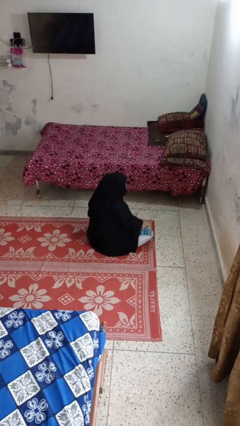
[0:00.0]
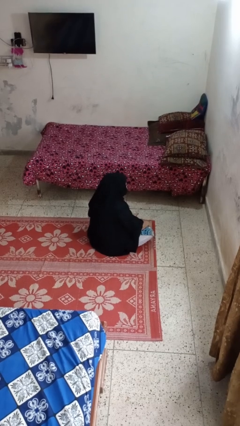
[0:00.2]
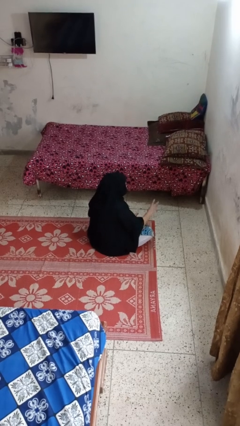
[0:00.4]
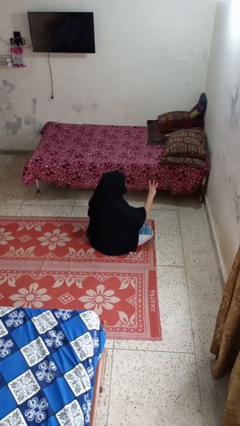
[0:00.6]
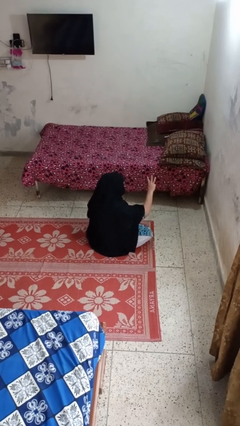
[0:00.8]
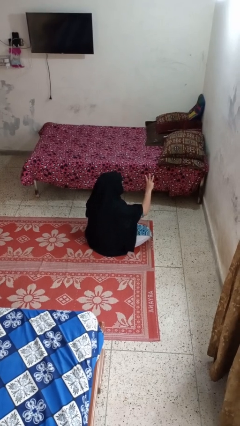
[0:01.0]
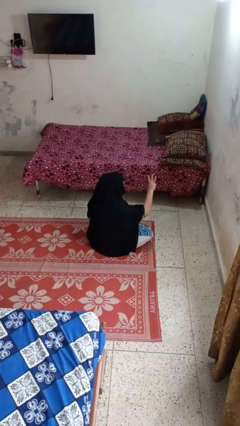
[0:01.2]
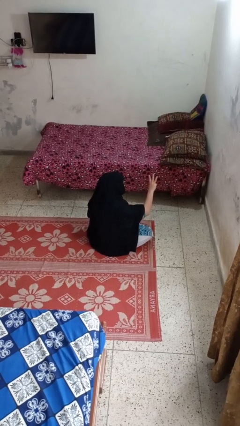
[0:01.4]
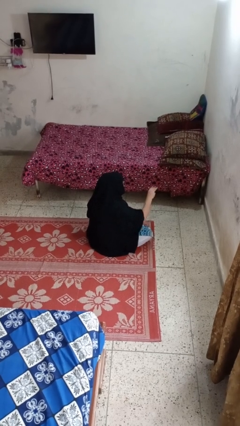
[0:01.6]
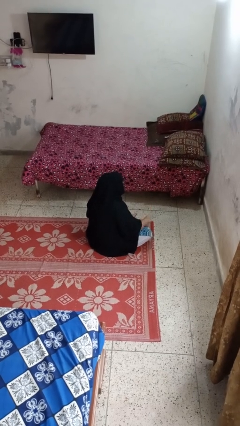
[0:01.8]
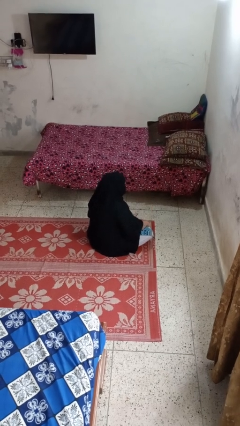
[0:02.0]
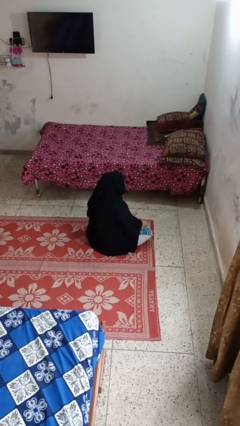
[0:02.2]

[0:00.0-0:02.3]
person gestures number three

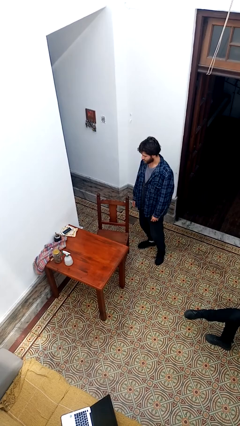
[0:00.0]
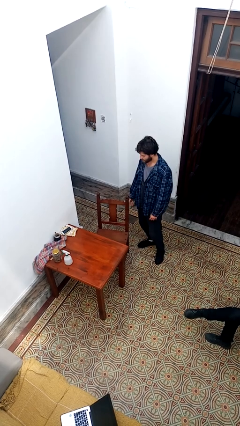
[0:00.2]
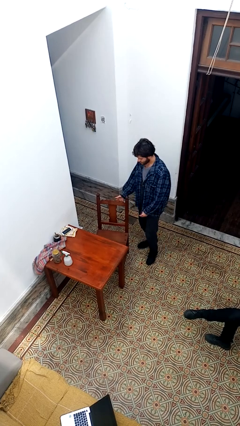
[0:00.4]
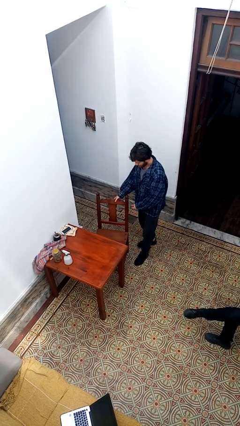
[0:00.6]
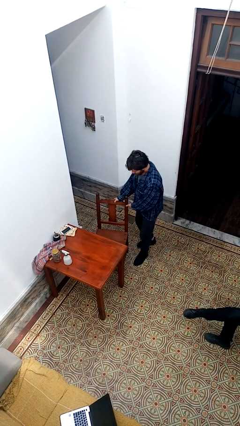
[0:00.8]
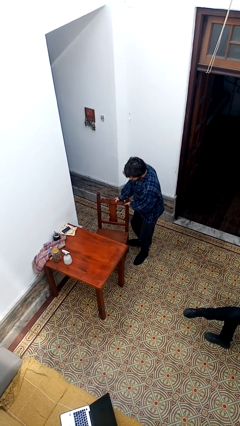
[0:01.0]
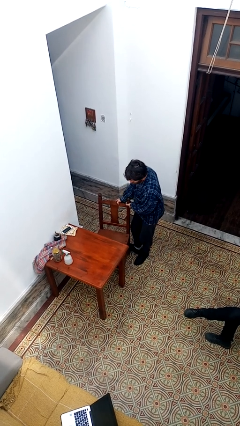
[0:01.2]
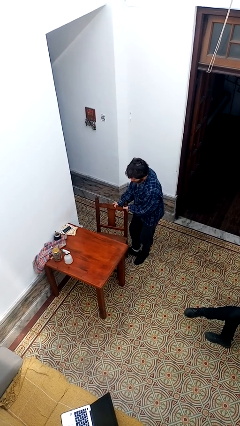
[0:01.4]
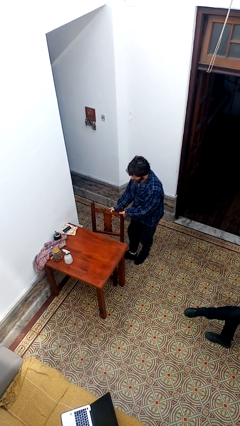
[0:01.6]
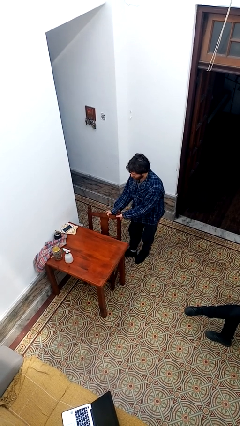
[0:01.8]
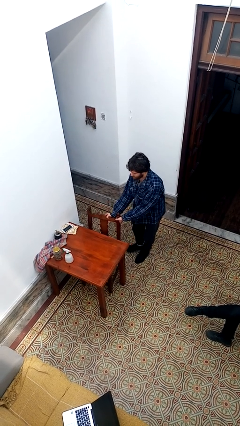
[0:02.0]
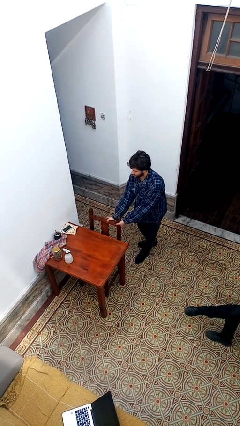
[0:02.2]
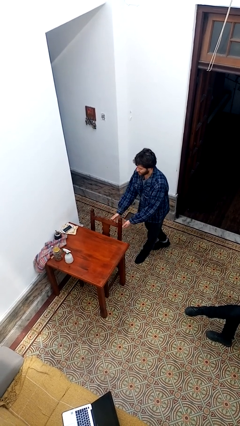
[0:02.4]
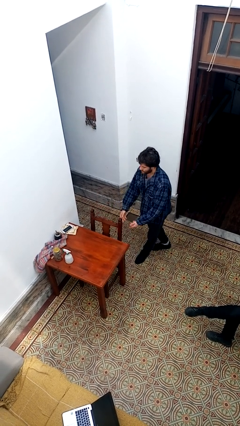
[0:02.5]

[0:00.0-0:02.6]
person pushes in chair

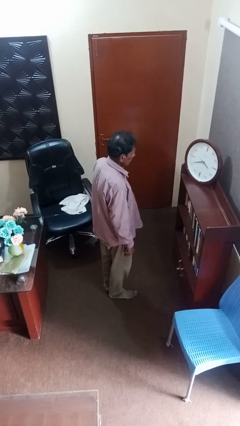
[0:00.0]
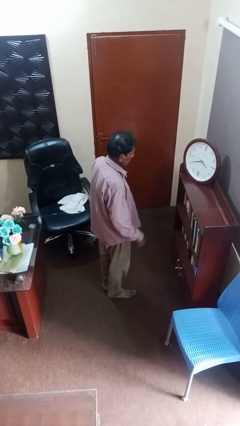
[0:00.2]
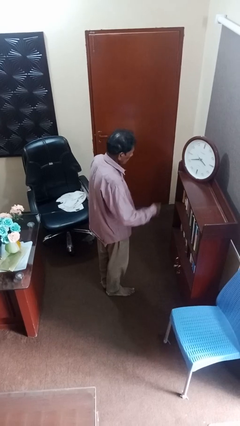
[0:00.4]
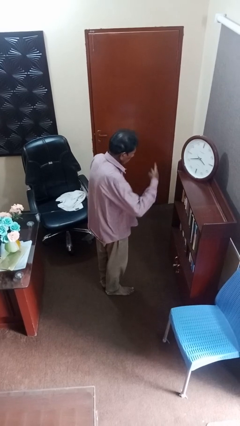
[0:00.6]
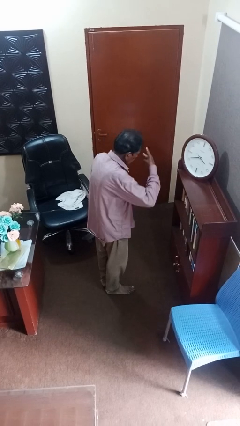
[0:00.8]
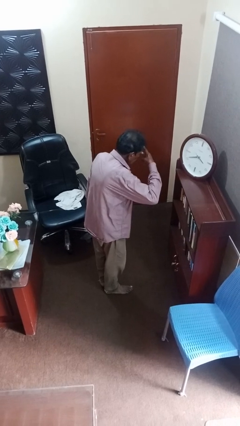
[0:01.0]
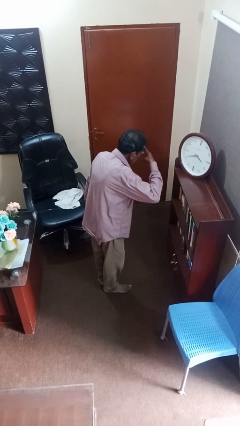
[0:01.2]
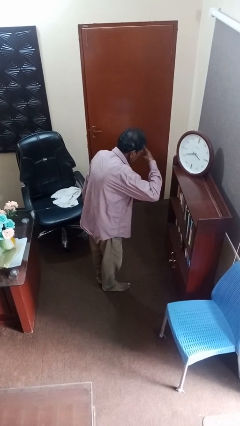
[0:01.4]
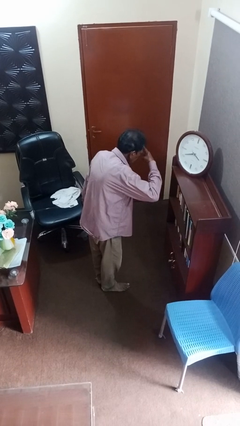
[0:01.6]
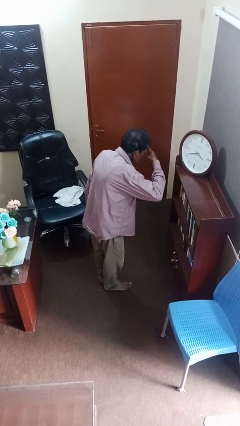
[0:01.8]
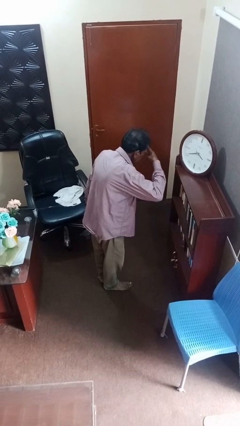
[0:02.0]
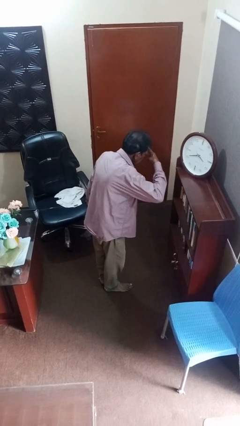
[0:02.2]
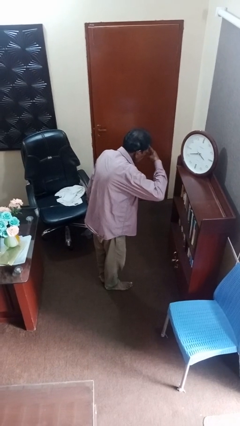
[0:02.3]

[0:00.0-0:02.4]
person gestures watch closely

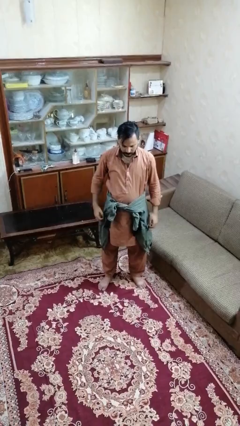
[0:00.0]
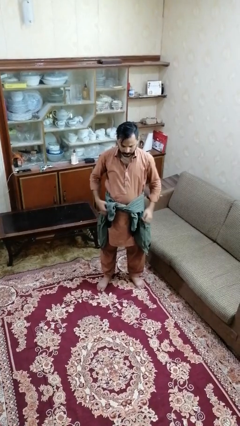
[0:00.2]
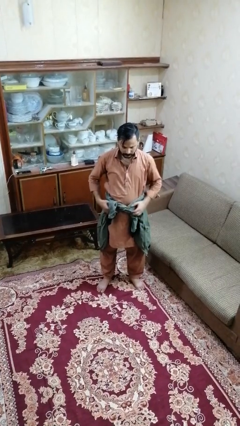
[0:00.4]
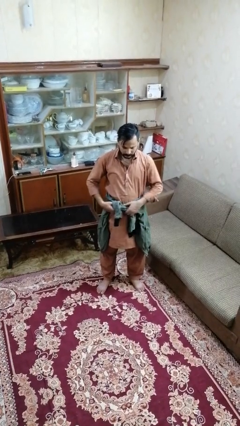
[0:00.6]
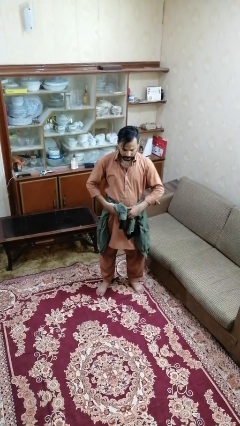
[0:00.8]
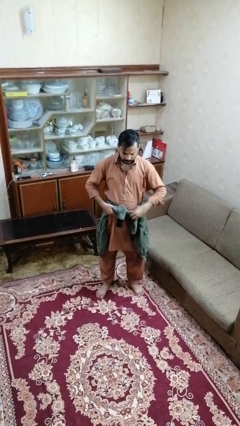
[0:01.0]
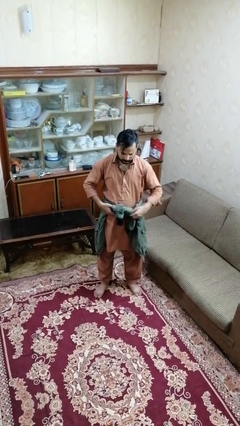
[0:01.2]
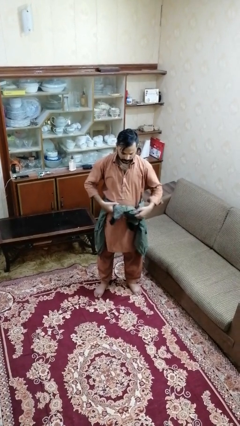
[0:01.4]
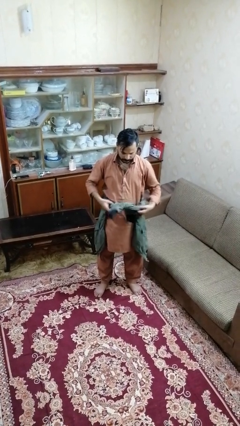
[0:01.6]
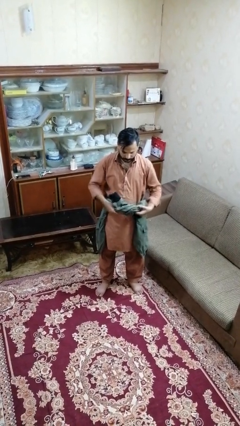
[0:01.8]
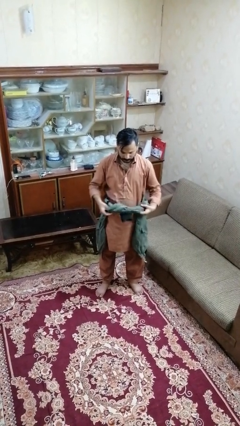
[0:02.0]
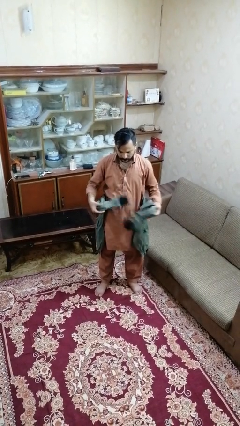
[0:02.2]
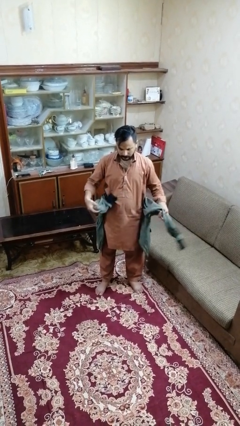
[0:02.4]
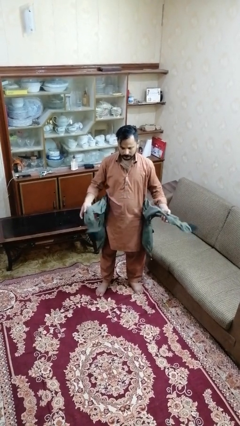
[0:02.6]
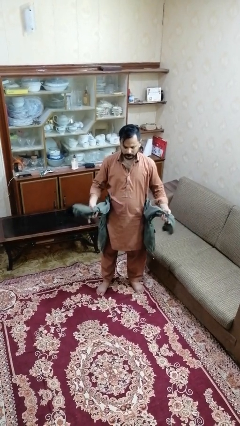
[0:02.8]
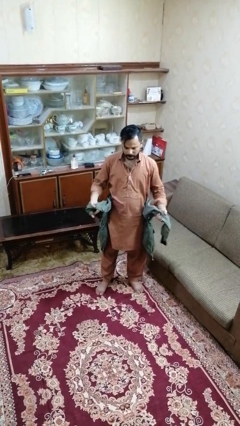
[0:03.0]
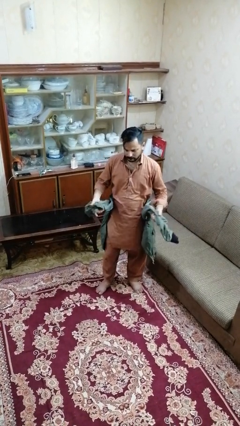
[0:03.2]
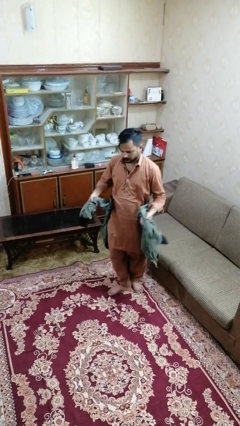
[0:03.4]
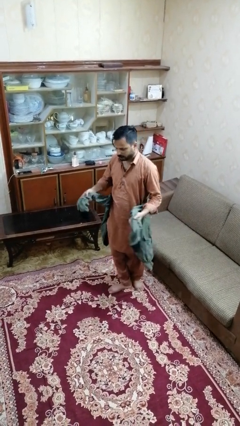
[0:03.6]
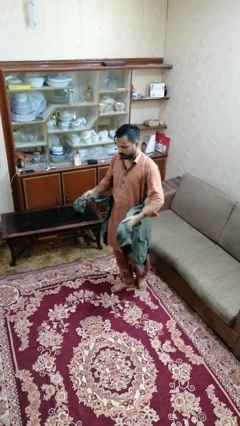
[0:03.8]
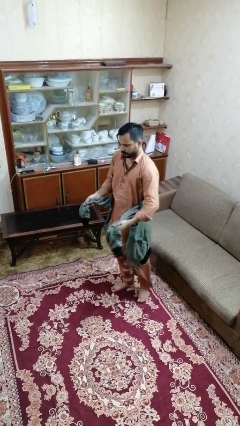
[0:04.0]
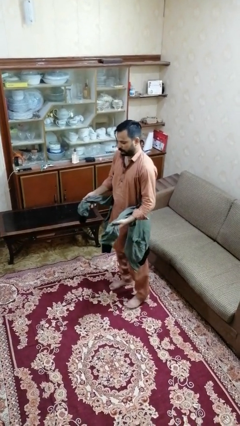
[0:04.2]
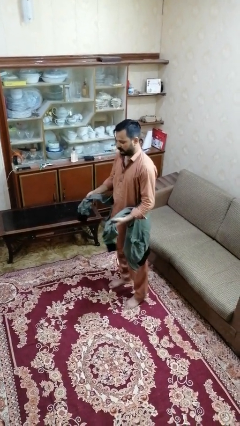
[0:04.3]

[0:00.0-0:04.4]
person unties jacket around waist

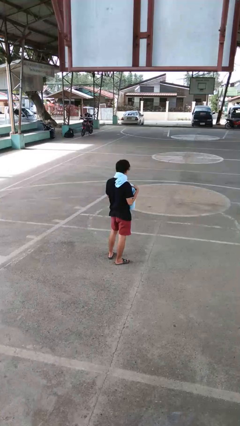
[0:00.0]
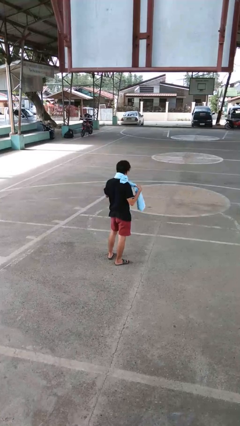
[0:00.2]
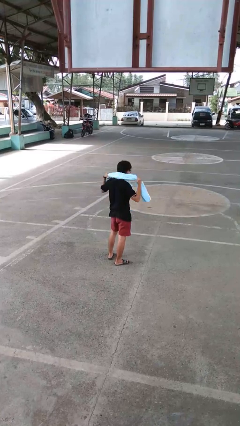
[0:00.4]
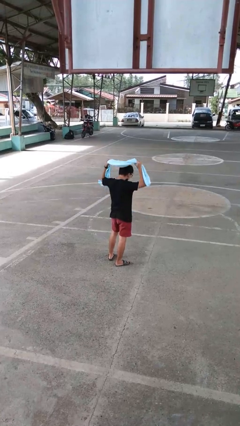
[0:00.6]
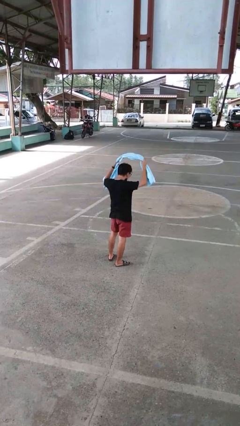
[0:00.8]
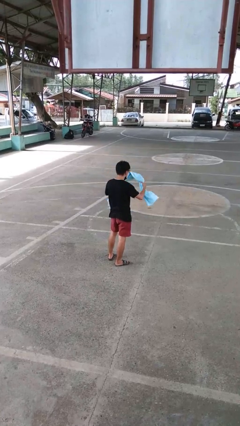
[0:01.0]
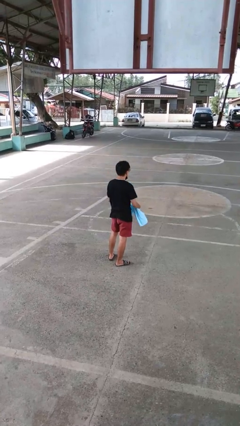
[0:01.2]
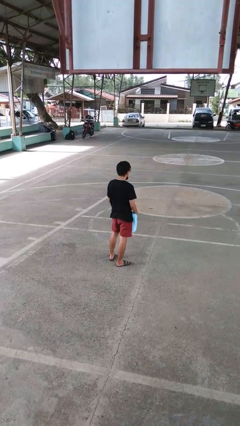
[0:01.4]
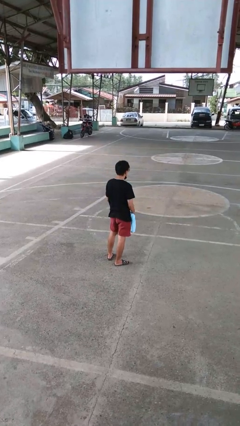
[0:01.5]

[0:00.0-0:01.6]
person takes off scarf

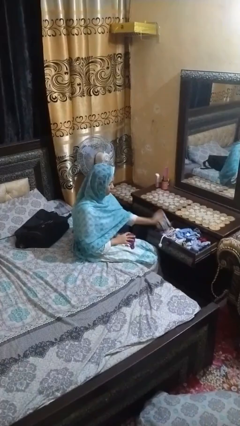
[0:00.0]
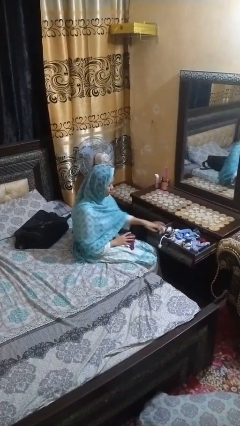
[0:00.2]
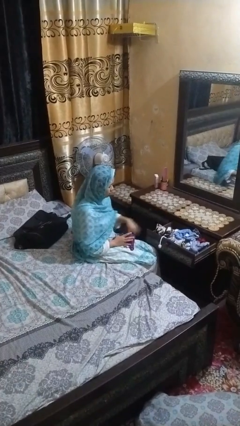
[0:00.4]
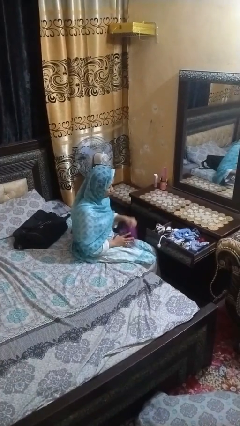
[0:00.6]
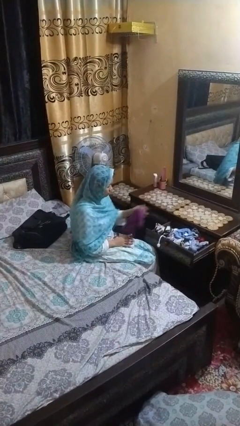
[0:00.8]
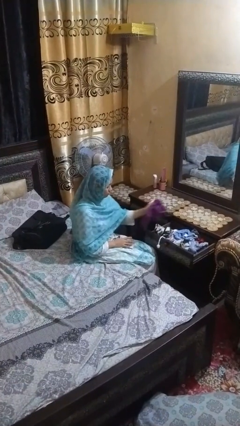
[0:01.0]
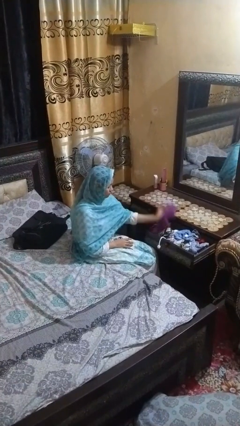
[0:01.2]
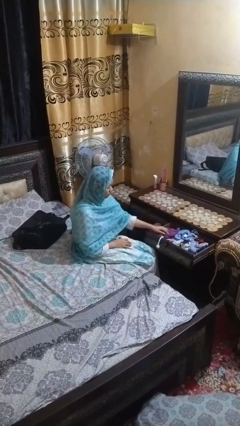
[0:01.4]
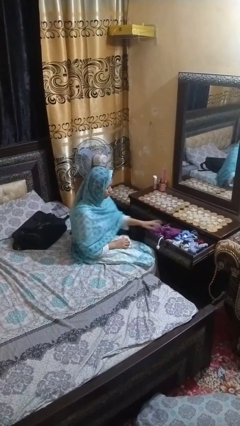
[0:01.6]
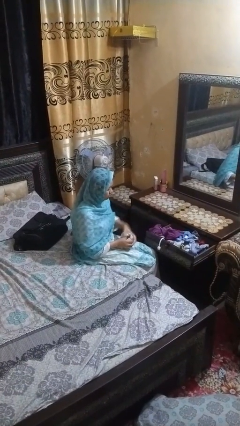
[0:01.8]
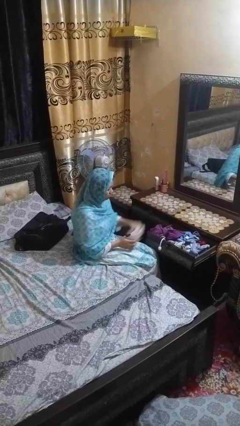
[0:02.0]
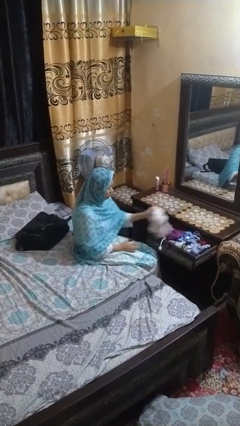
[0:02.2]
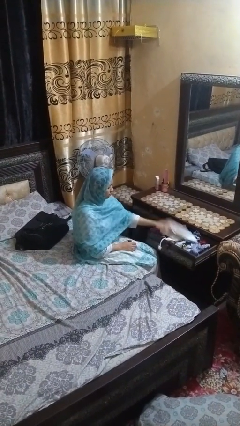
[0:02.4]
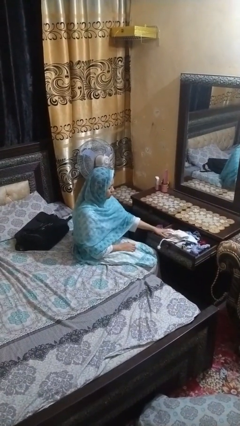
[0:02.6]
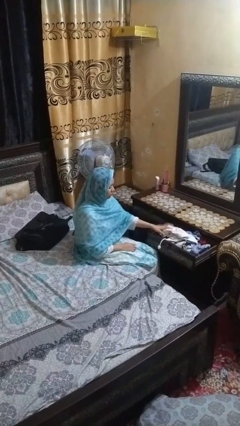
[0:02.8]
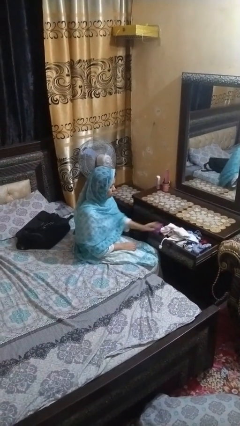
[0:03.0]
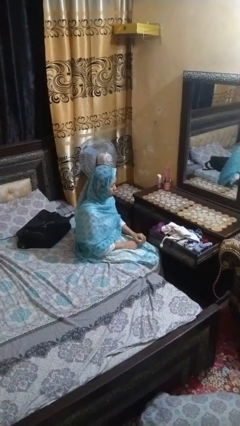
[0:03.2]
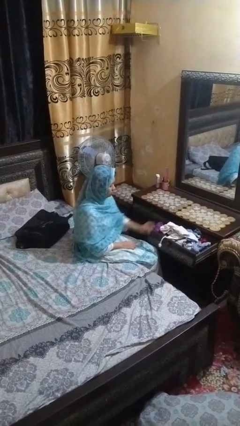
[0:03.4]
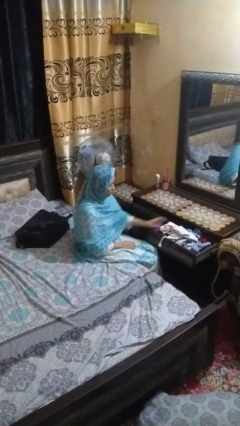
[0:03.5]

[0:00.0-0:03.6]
person puts clothes into dresser

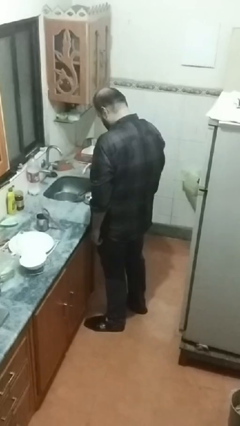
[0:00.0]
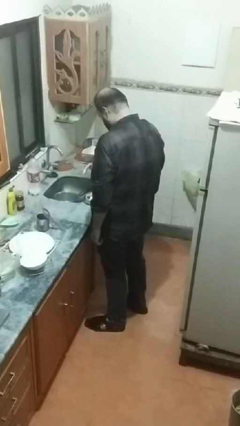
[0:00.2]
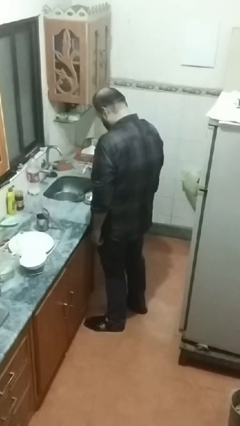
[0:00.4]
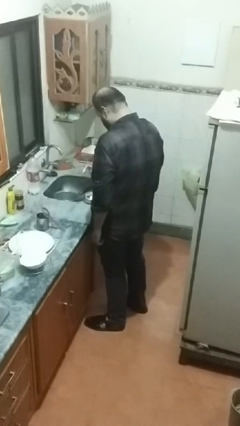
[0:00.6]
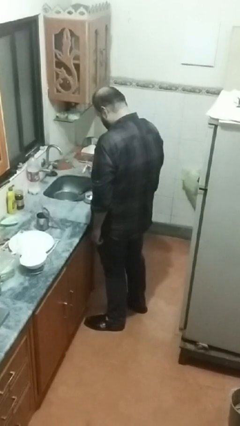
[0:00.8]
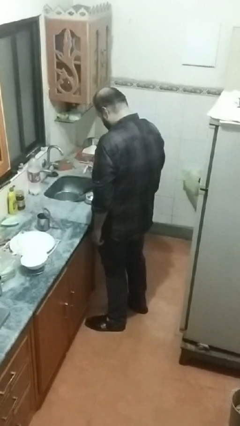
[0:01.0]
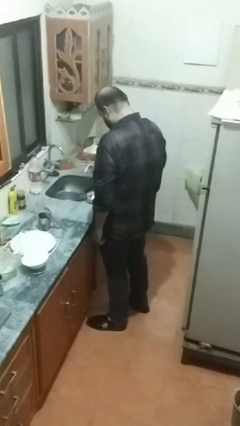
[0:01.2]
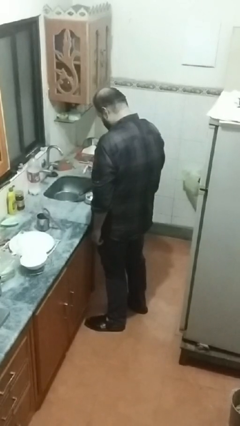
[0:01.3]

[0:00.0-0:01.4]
person pours into bowl
